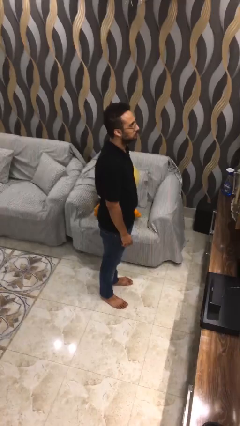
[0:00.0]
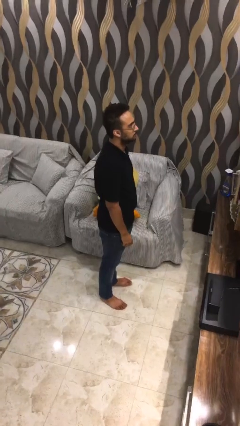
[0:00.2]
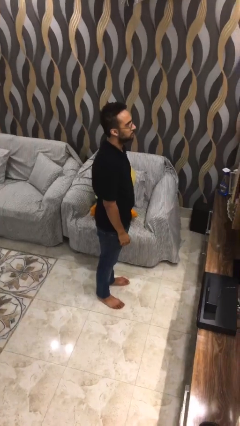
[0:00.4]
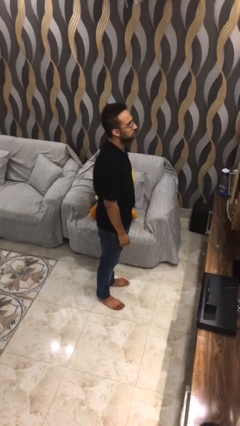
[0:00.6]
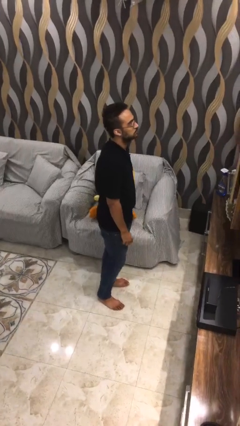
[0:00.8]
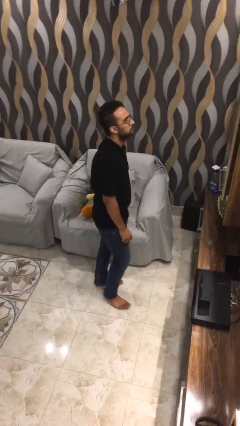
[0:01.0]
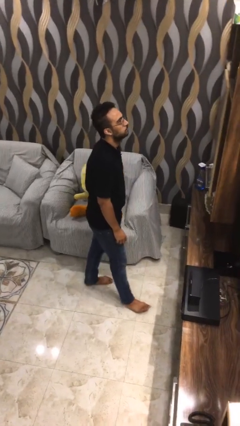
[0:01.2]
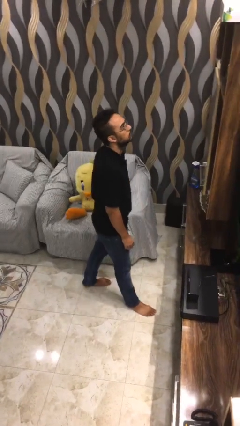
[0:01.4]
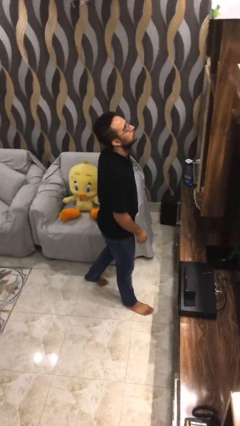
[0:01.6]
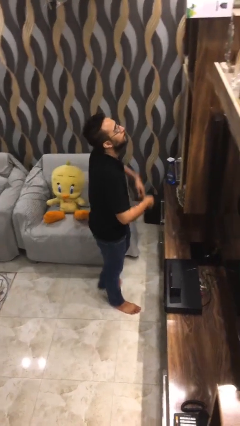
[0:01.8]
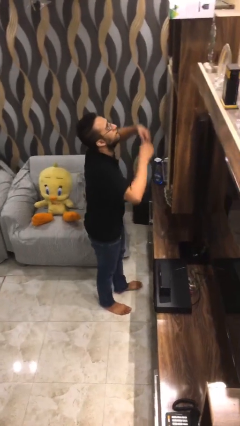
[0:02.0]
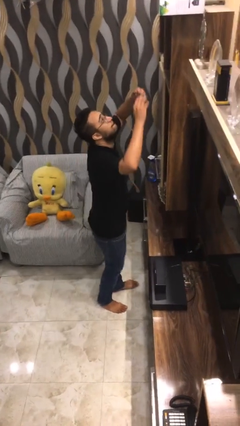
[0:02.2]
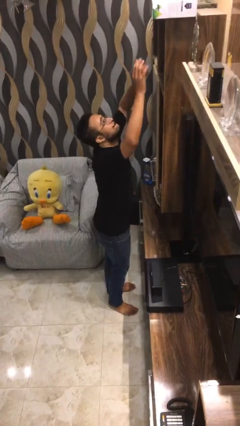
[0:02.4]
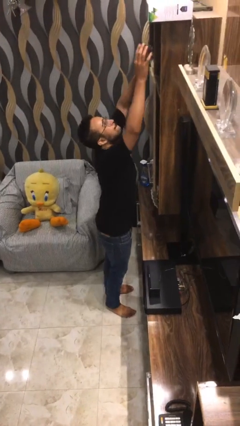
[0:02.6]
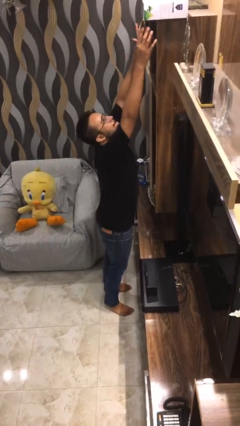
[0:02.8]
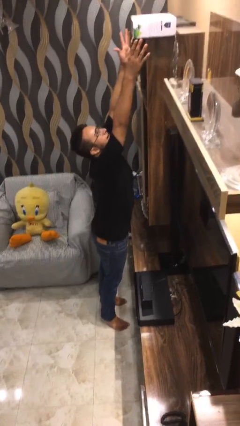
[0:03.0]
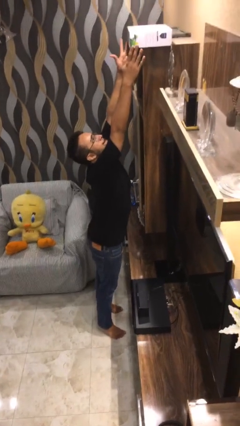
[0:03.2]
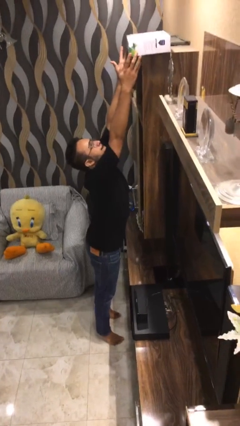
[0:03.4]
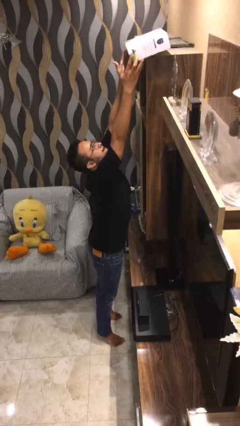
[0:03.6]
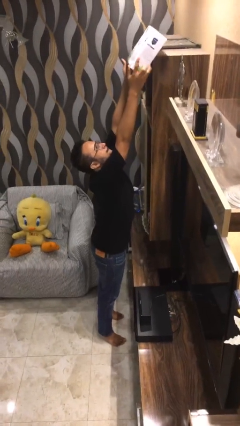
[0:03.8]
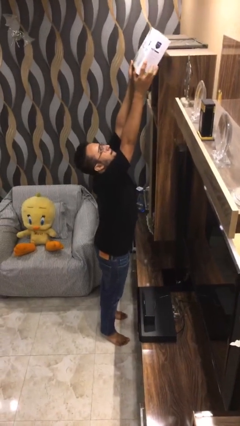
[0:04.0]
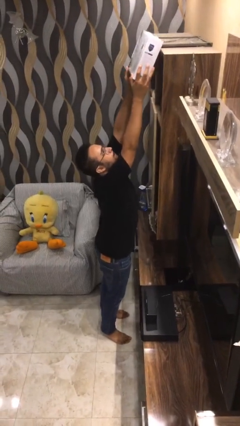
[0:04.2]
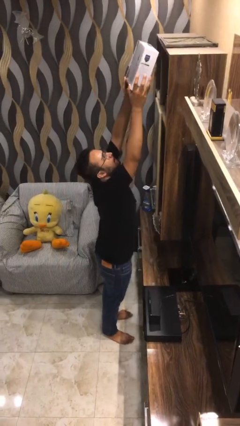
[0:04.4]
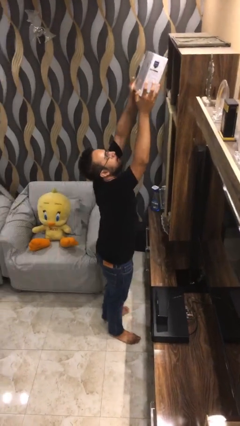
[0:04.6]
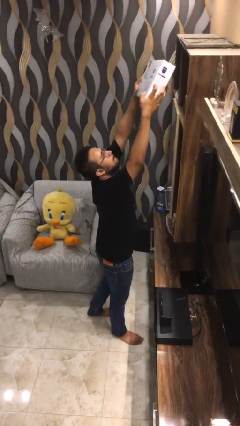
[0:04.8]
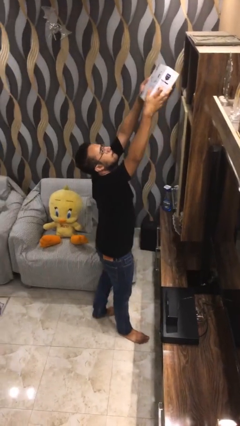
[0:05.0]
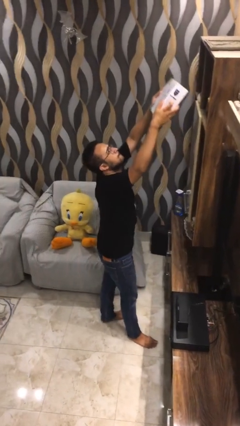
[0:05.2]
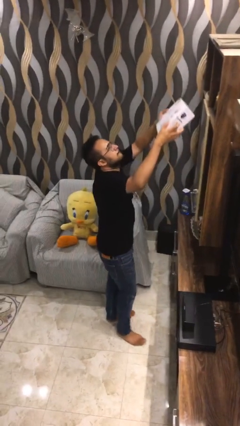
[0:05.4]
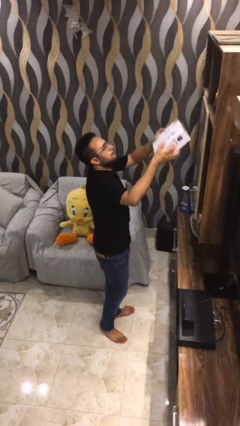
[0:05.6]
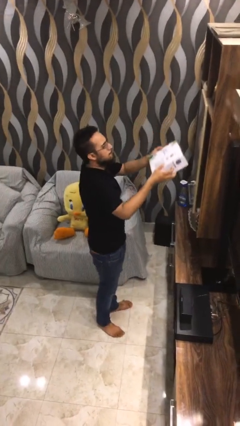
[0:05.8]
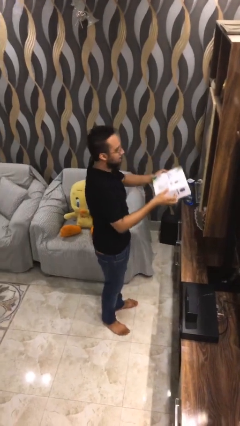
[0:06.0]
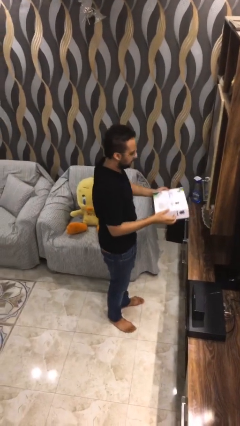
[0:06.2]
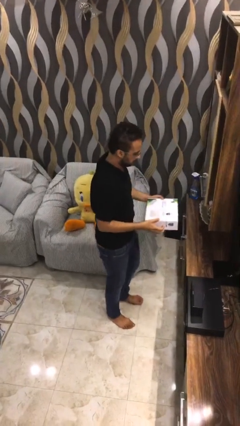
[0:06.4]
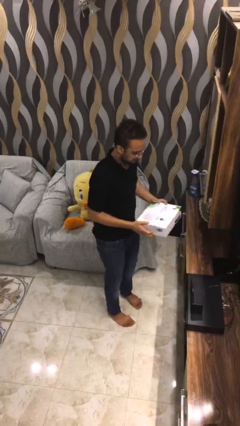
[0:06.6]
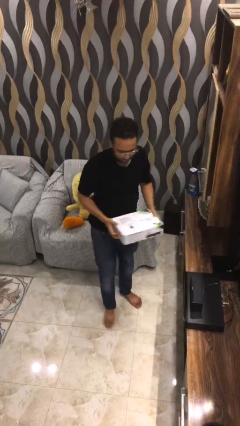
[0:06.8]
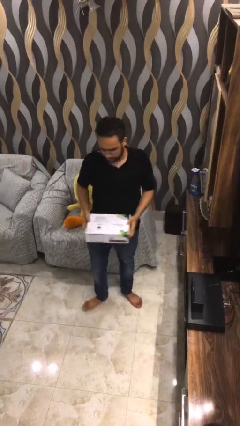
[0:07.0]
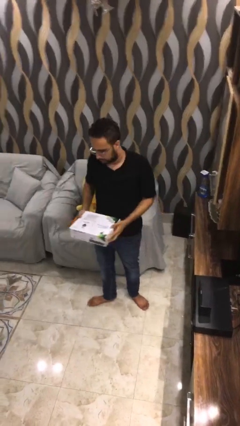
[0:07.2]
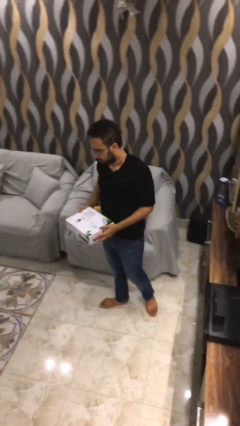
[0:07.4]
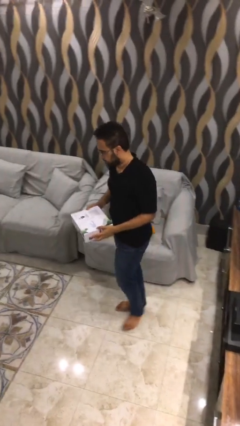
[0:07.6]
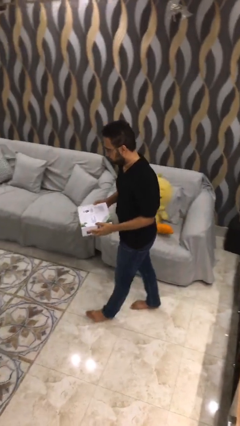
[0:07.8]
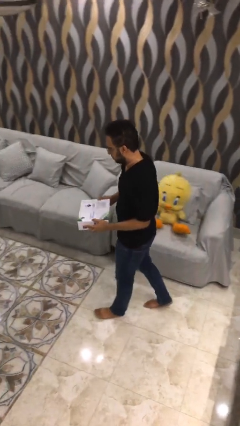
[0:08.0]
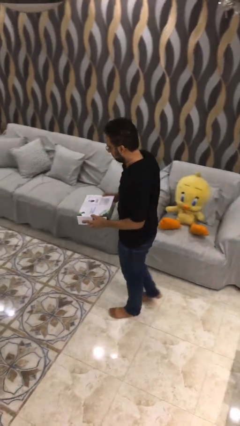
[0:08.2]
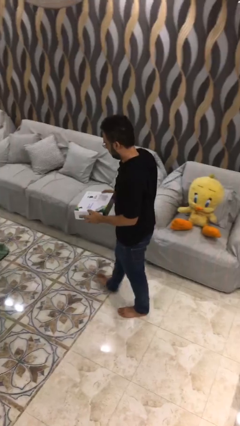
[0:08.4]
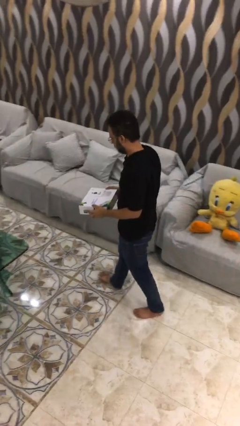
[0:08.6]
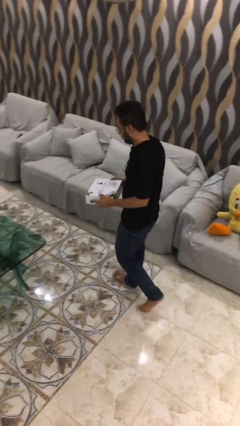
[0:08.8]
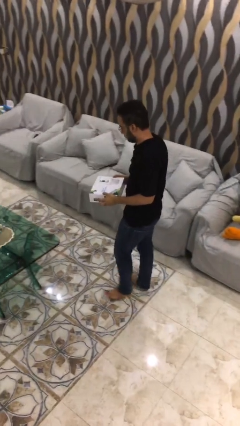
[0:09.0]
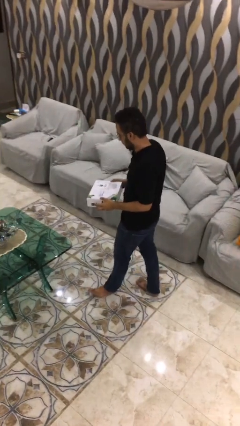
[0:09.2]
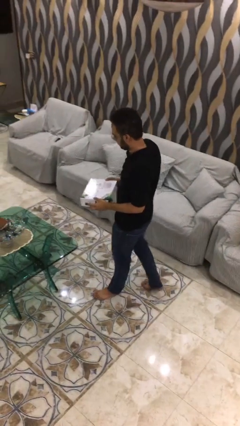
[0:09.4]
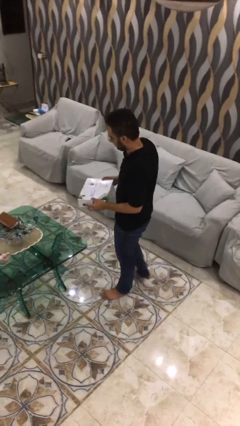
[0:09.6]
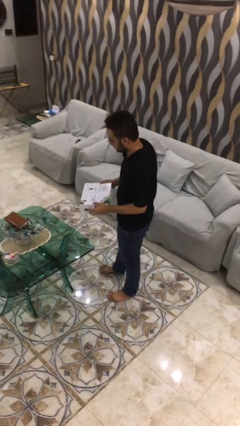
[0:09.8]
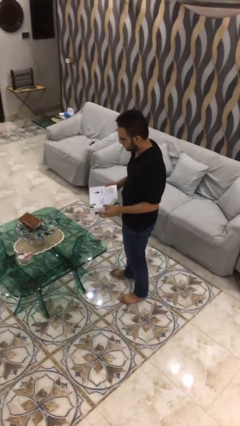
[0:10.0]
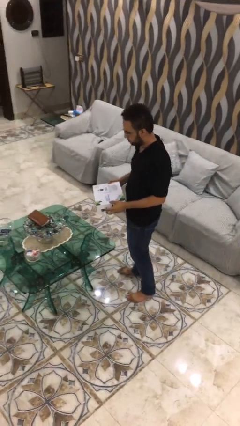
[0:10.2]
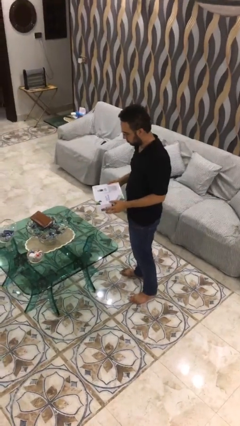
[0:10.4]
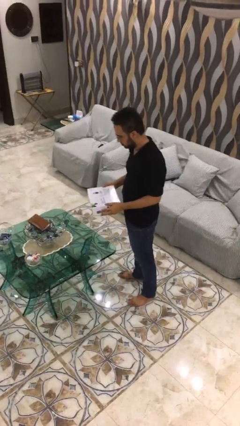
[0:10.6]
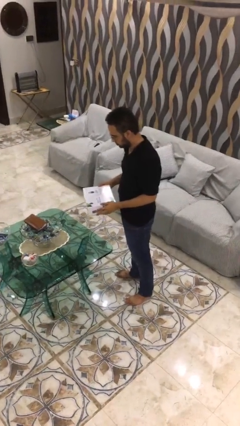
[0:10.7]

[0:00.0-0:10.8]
person picks up object from shelf

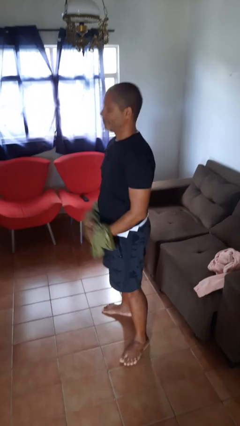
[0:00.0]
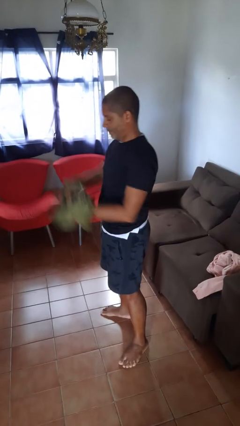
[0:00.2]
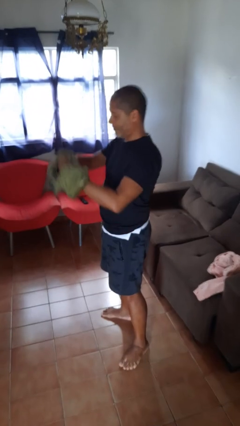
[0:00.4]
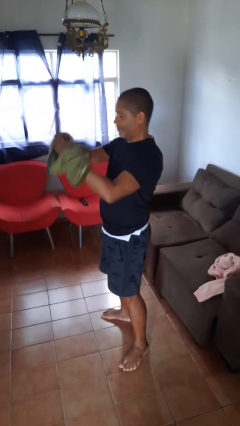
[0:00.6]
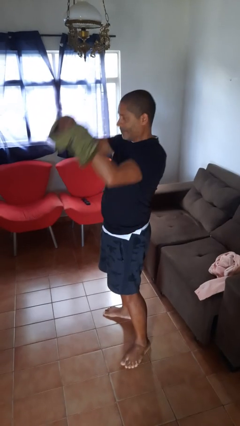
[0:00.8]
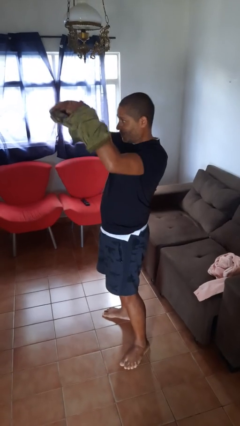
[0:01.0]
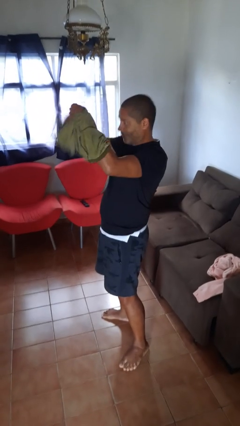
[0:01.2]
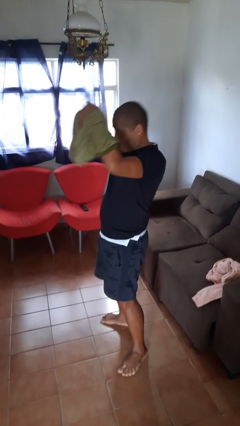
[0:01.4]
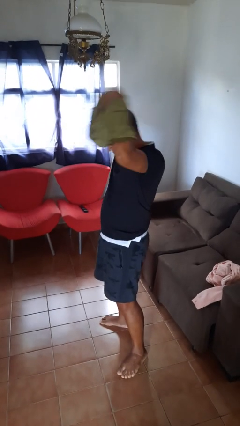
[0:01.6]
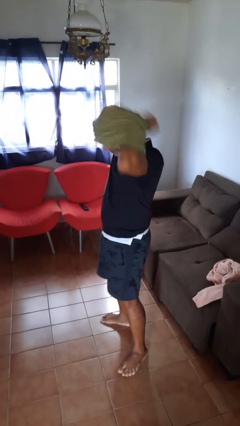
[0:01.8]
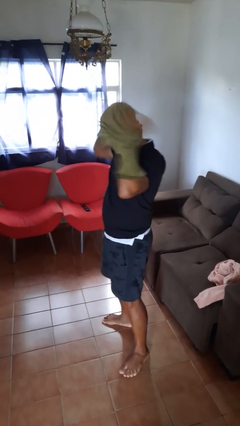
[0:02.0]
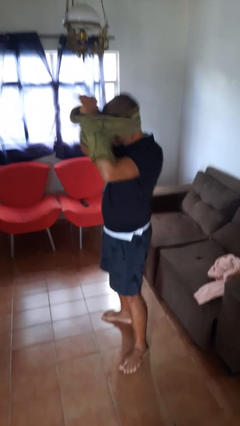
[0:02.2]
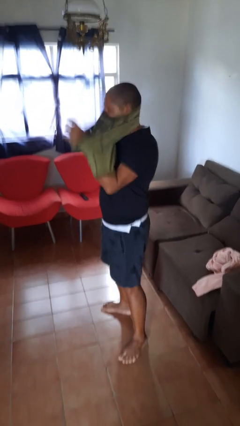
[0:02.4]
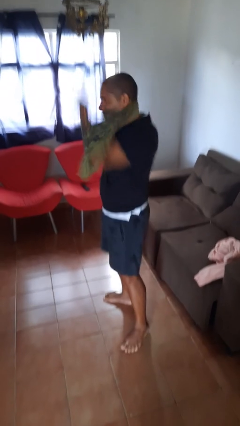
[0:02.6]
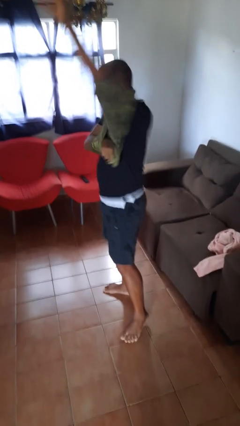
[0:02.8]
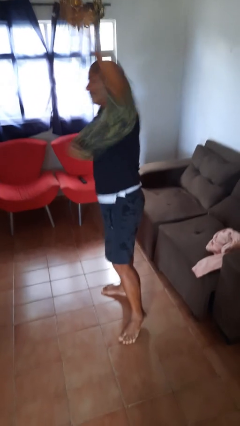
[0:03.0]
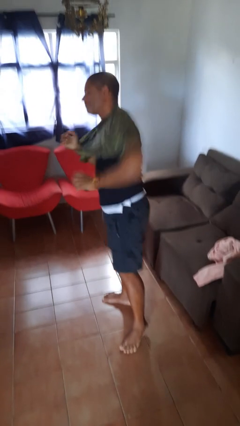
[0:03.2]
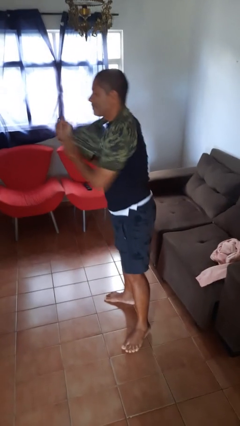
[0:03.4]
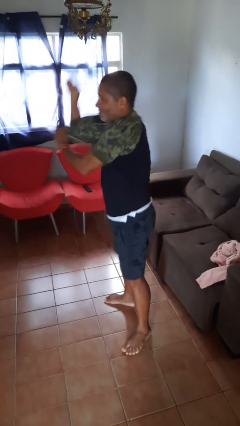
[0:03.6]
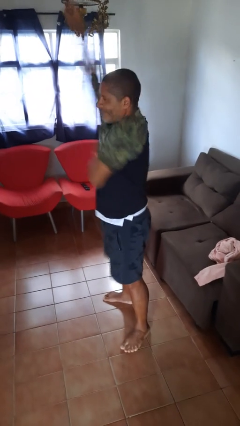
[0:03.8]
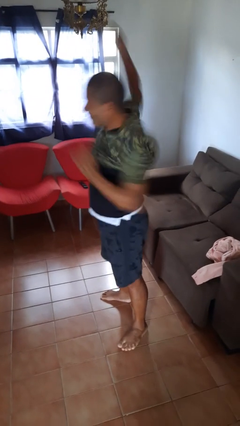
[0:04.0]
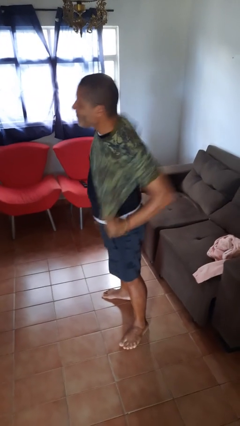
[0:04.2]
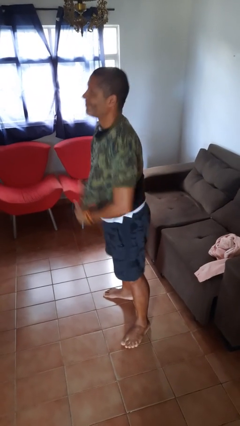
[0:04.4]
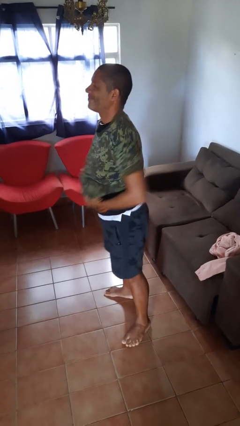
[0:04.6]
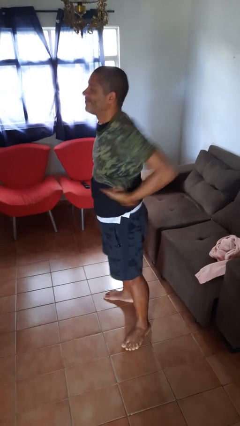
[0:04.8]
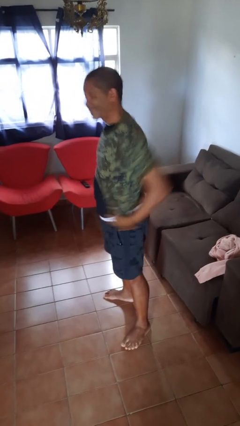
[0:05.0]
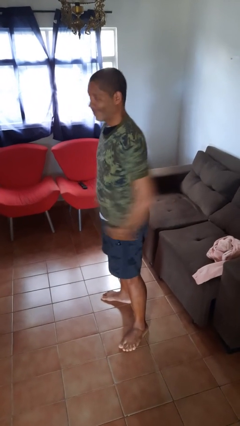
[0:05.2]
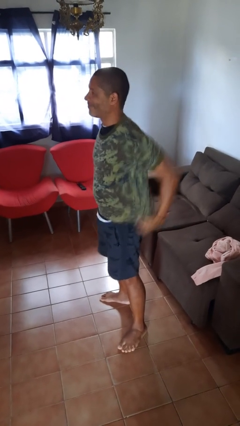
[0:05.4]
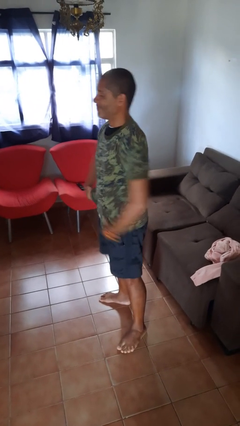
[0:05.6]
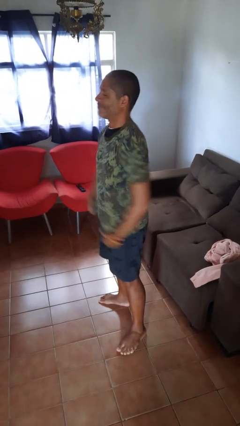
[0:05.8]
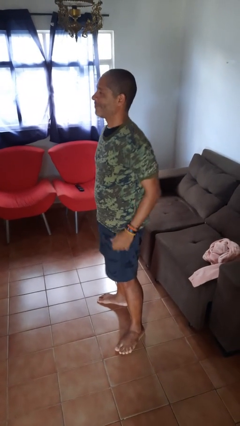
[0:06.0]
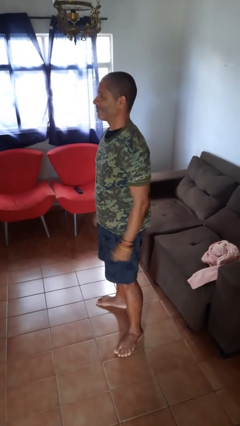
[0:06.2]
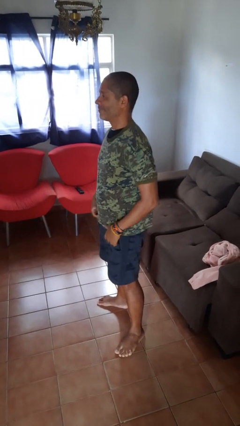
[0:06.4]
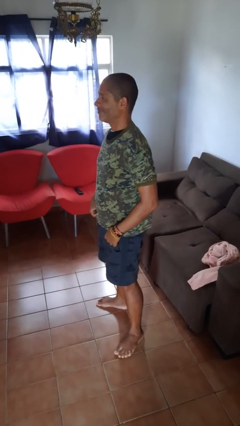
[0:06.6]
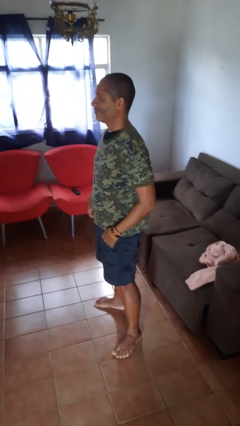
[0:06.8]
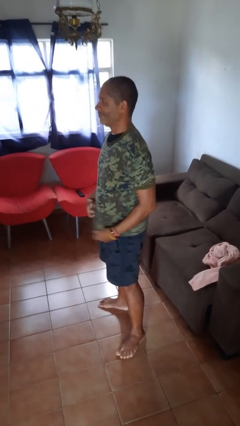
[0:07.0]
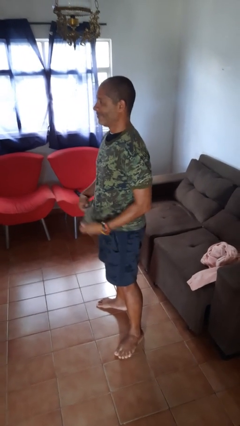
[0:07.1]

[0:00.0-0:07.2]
person puts on shirt

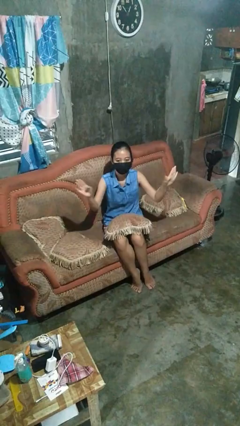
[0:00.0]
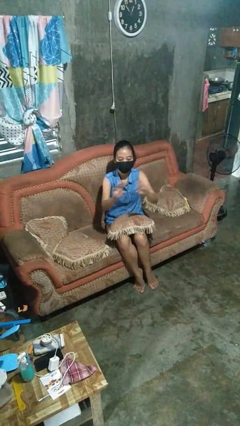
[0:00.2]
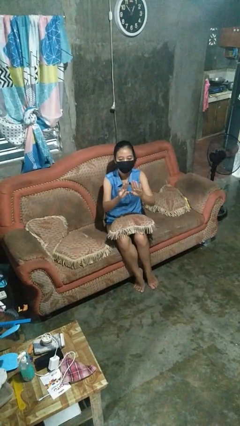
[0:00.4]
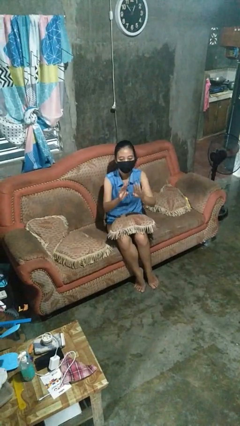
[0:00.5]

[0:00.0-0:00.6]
person gestures zoom out
